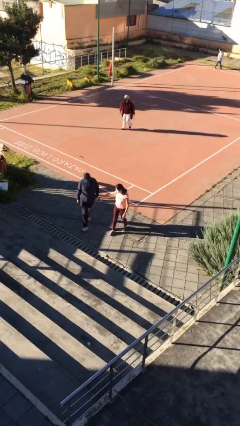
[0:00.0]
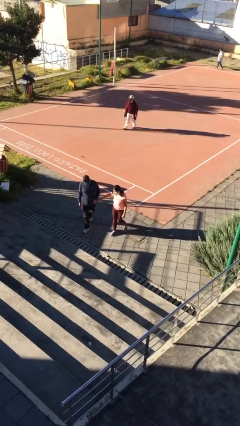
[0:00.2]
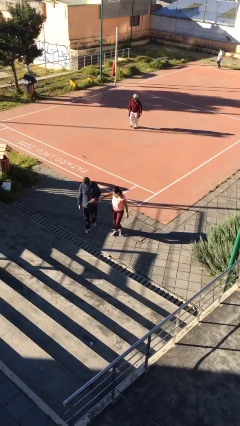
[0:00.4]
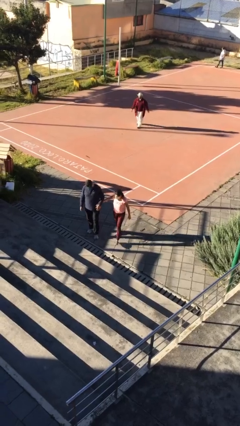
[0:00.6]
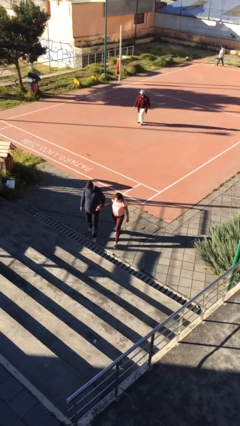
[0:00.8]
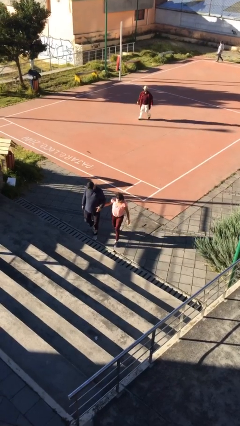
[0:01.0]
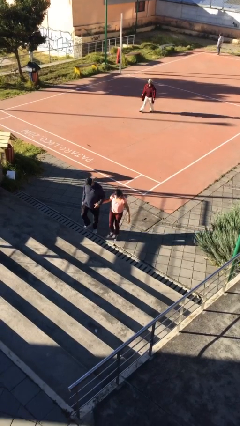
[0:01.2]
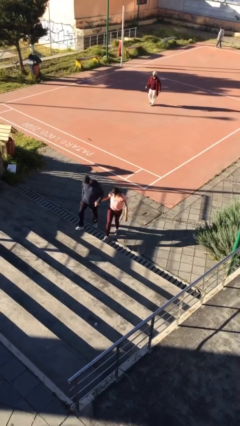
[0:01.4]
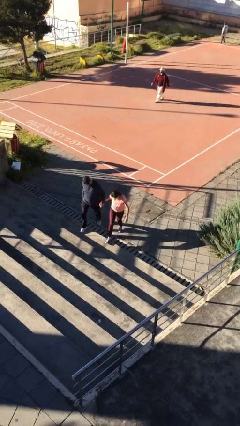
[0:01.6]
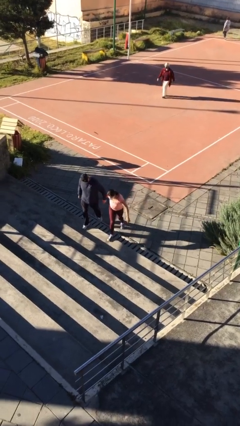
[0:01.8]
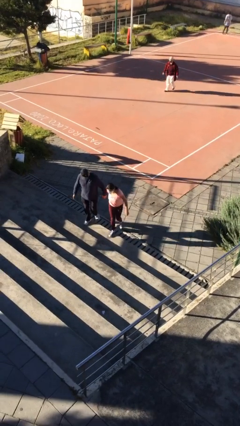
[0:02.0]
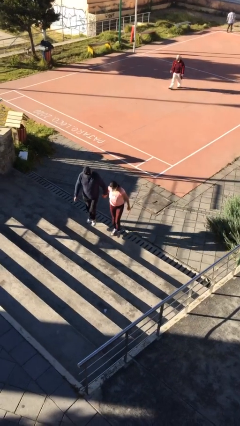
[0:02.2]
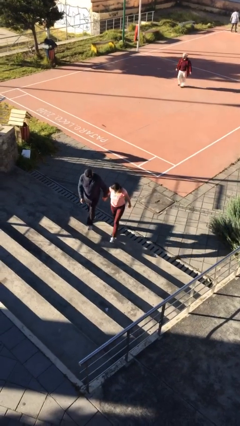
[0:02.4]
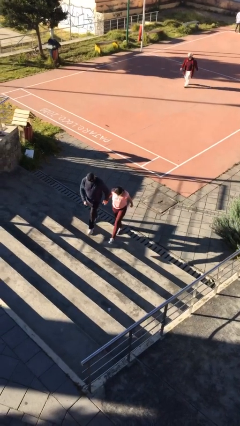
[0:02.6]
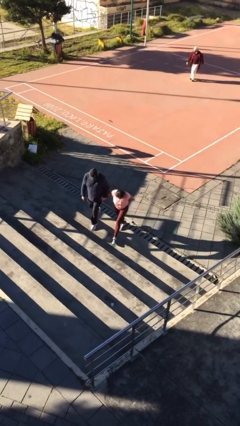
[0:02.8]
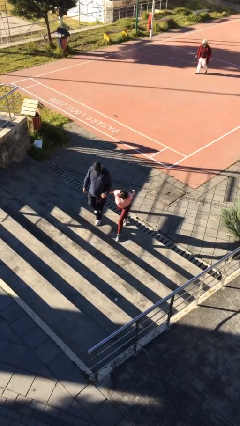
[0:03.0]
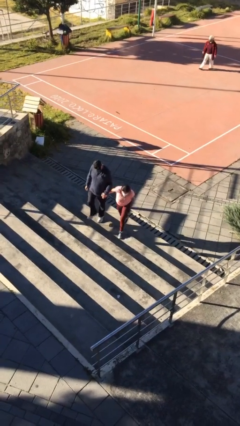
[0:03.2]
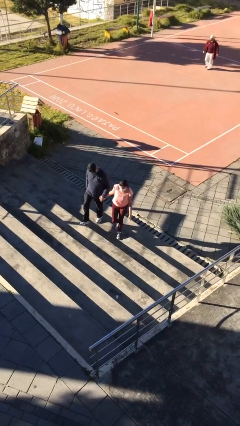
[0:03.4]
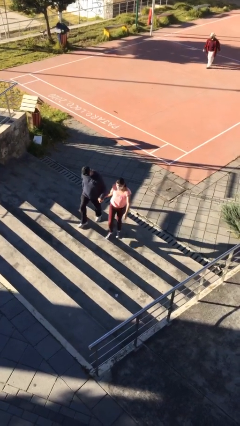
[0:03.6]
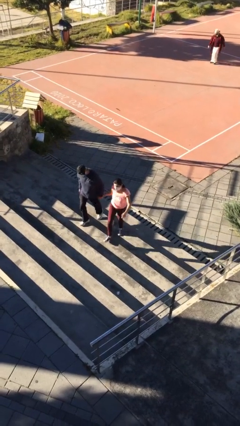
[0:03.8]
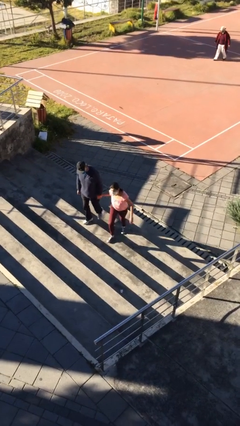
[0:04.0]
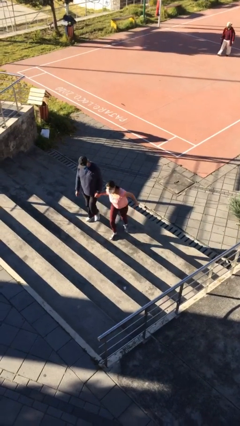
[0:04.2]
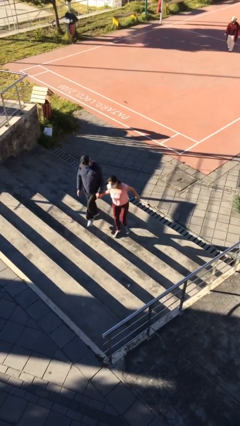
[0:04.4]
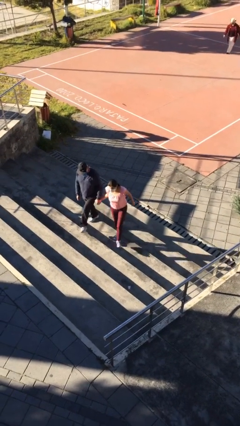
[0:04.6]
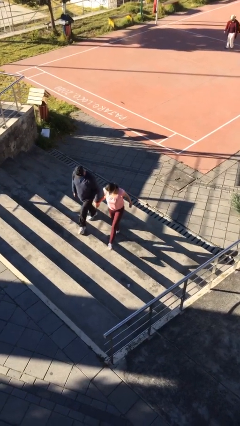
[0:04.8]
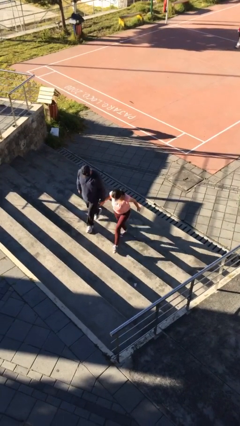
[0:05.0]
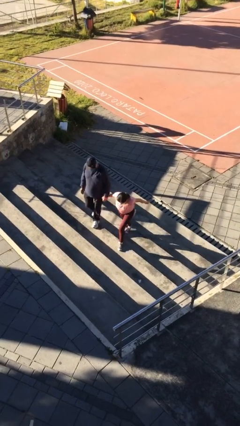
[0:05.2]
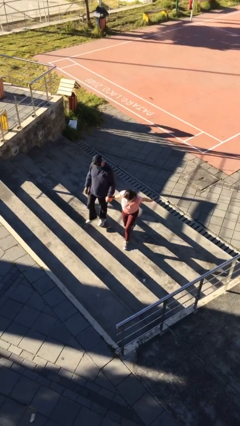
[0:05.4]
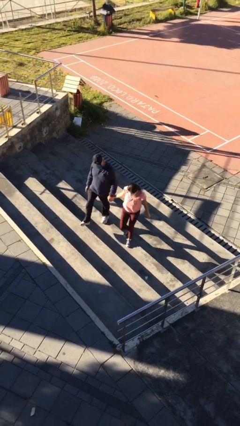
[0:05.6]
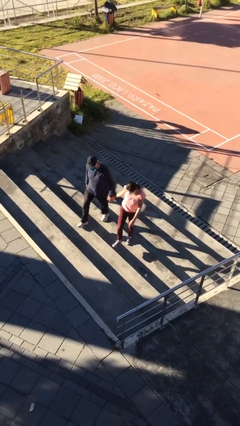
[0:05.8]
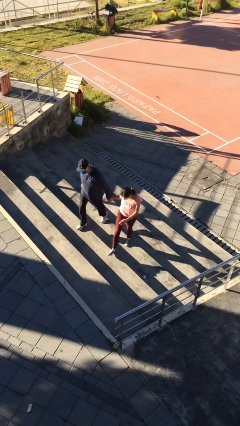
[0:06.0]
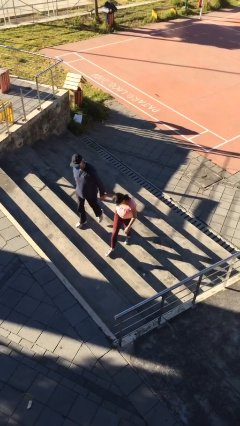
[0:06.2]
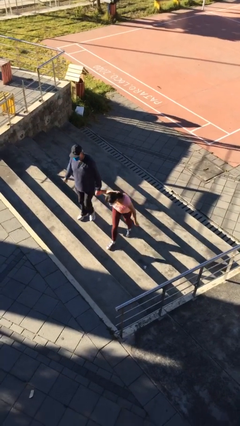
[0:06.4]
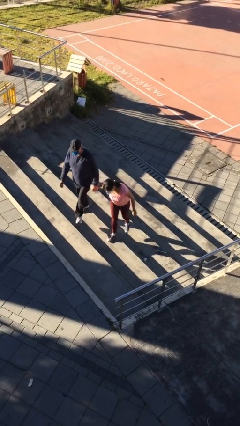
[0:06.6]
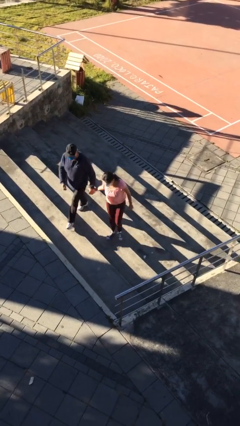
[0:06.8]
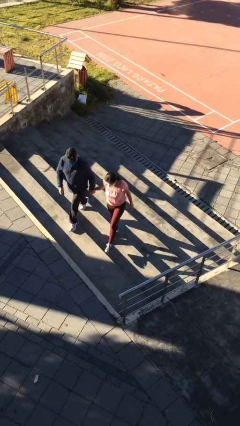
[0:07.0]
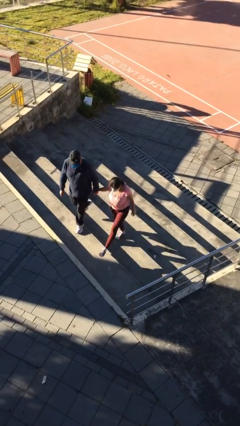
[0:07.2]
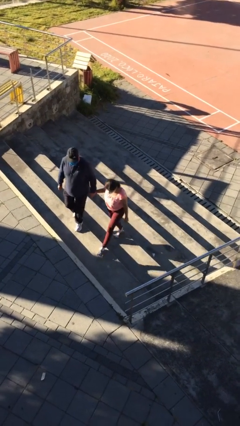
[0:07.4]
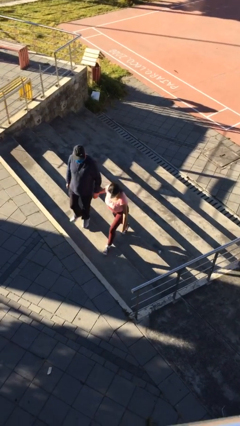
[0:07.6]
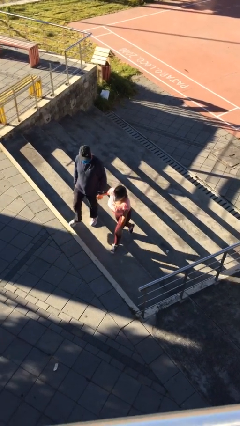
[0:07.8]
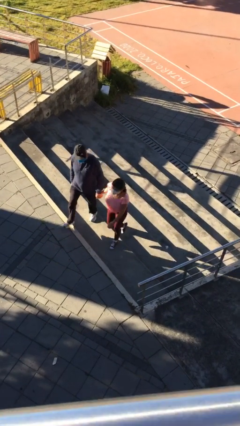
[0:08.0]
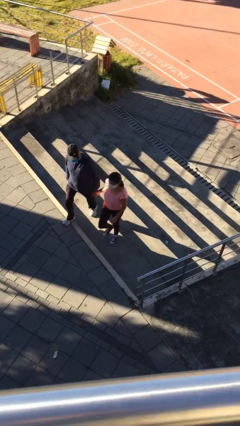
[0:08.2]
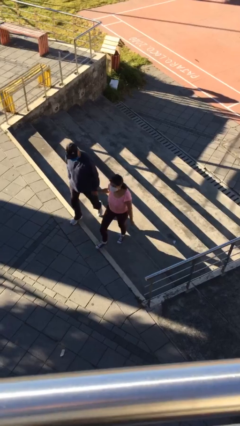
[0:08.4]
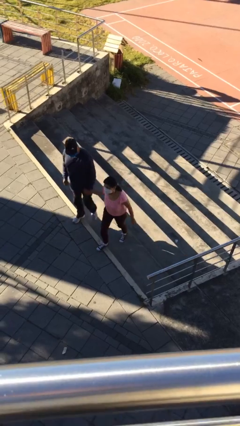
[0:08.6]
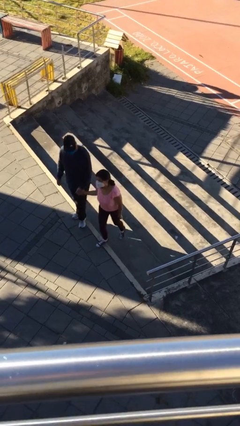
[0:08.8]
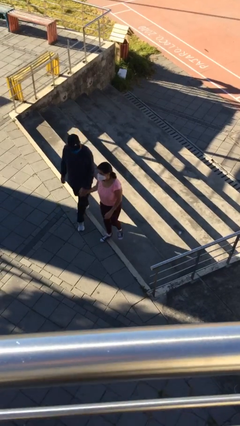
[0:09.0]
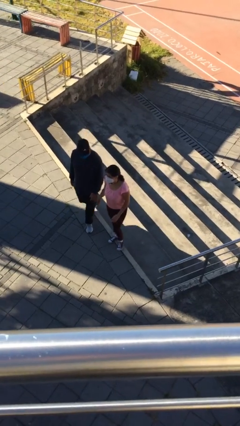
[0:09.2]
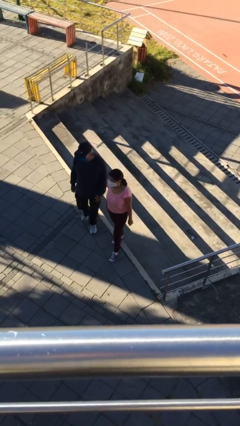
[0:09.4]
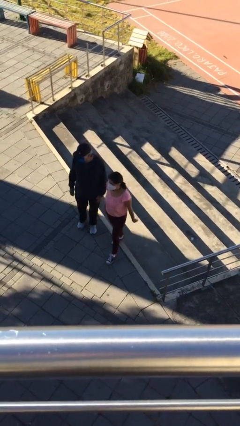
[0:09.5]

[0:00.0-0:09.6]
person holds hand

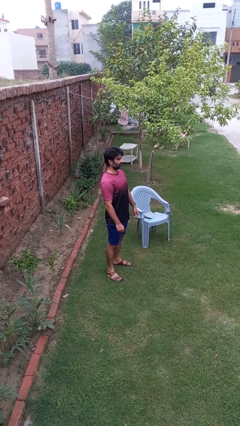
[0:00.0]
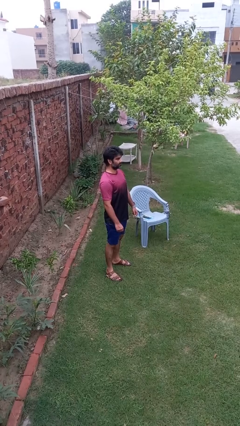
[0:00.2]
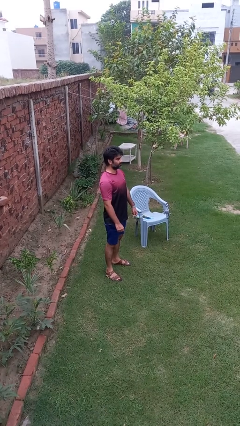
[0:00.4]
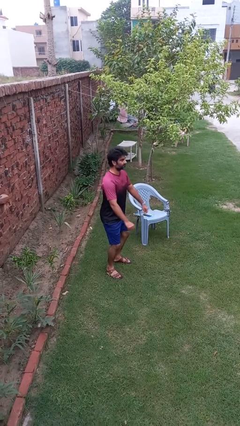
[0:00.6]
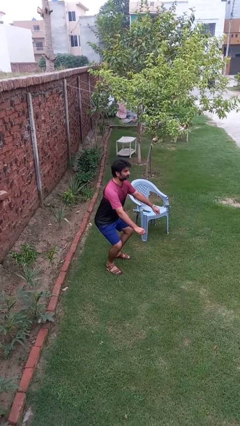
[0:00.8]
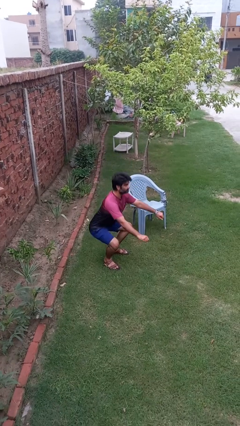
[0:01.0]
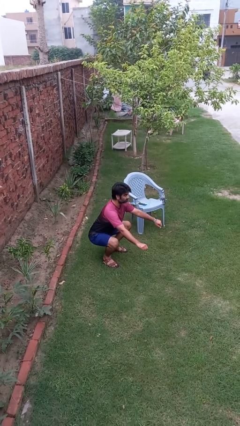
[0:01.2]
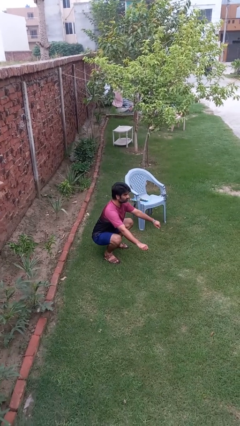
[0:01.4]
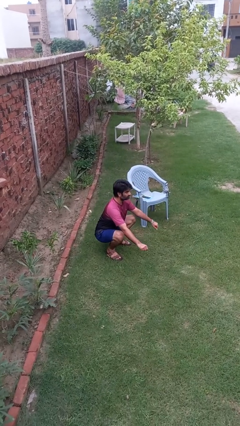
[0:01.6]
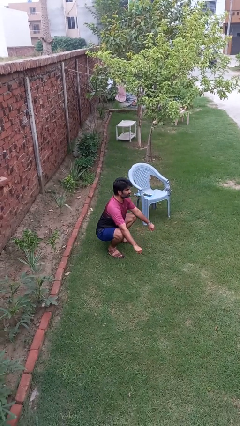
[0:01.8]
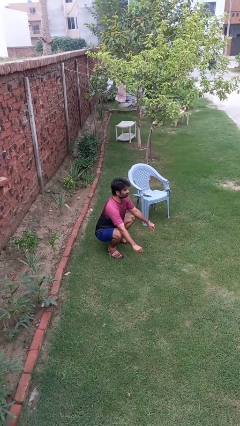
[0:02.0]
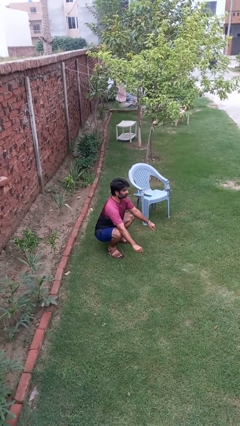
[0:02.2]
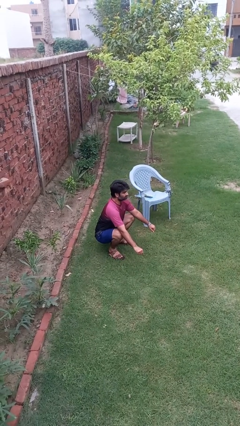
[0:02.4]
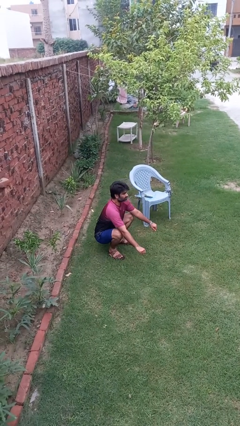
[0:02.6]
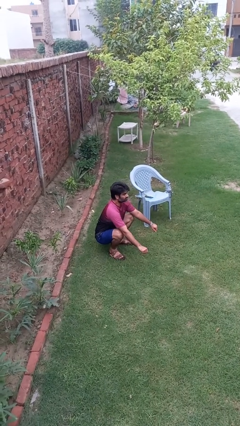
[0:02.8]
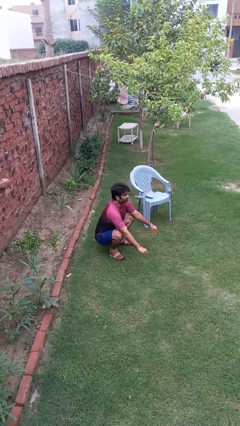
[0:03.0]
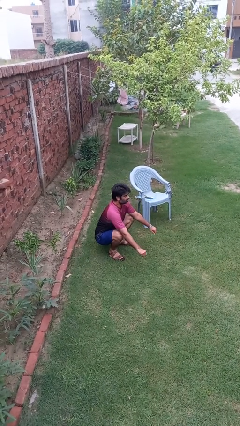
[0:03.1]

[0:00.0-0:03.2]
person squats

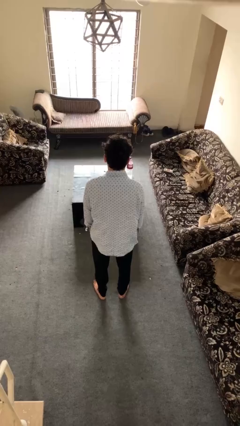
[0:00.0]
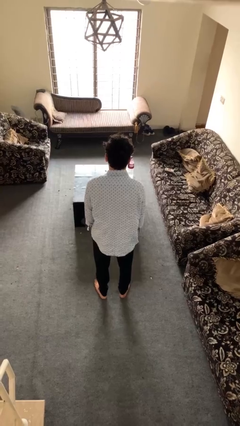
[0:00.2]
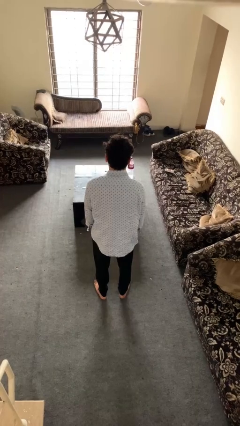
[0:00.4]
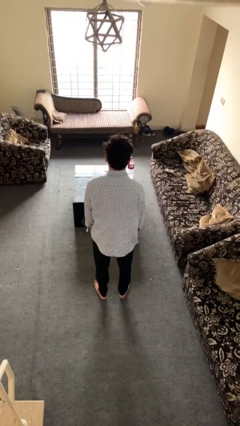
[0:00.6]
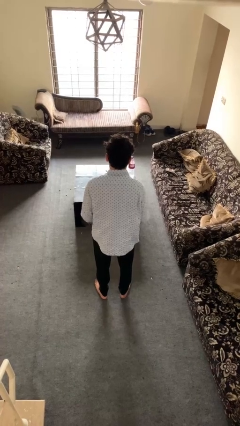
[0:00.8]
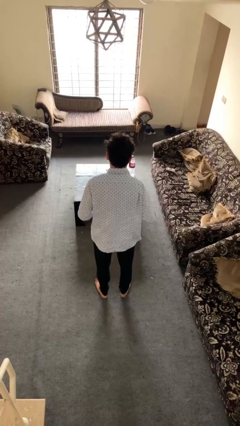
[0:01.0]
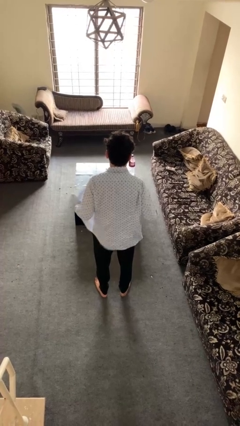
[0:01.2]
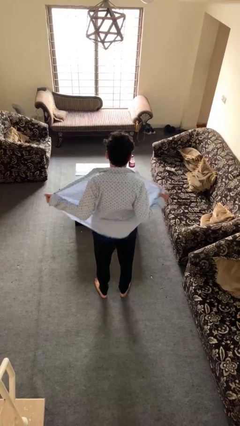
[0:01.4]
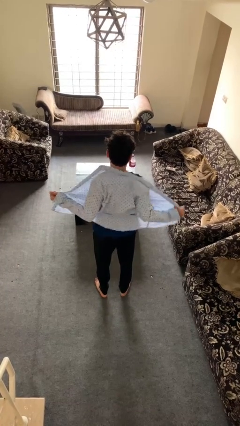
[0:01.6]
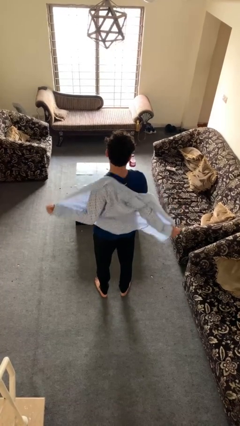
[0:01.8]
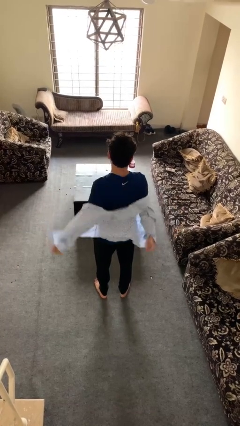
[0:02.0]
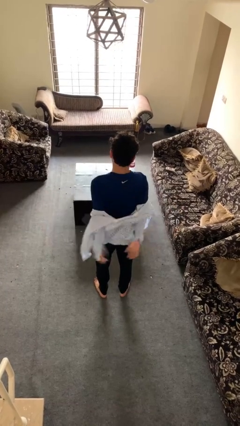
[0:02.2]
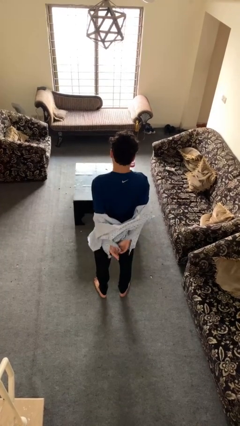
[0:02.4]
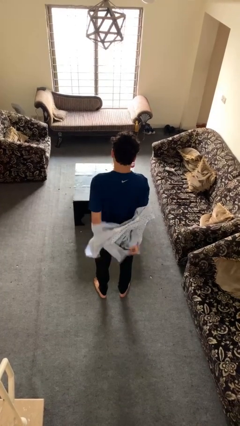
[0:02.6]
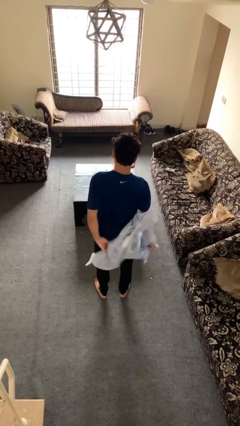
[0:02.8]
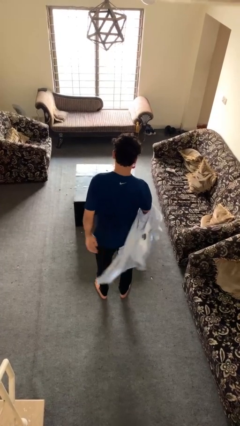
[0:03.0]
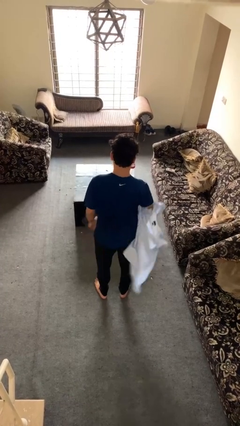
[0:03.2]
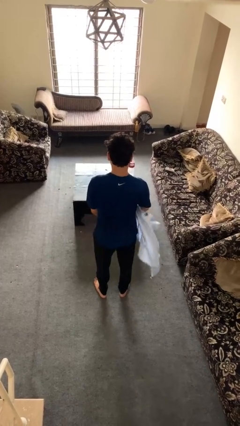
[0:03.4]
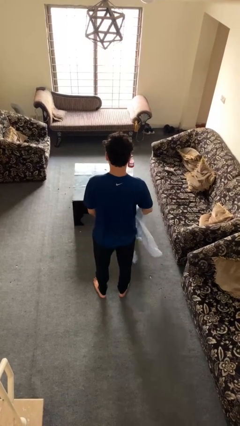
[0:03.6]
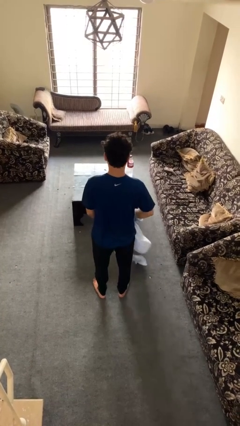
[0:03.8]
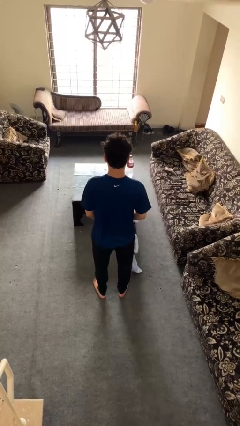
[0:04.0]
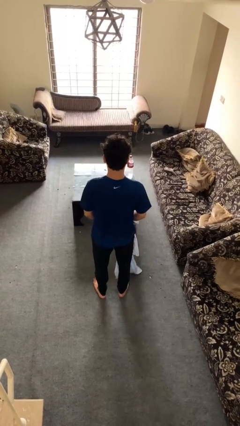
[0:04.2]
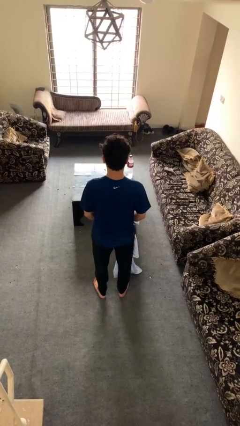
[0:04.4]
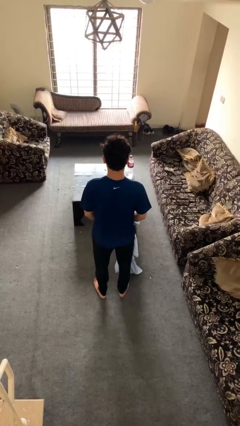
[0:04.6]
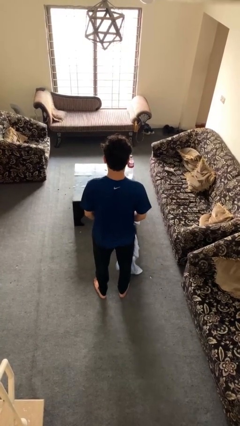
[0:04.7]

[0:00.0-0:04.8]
person takes off shirt

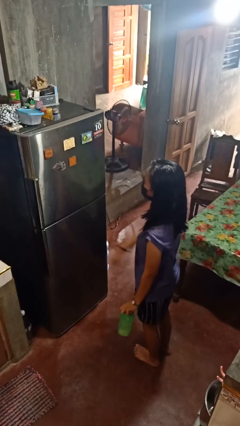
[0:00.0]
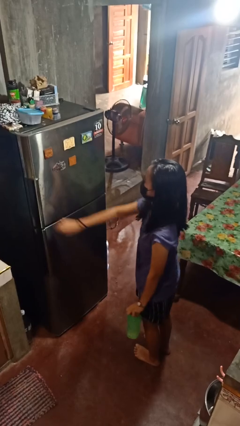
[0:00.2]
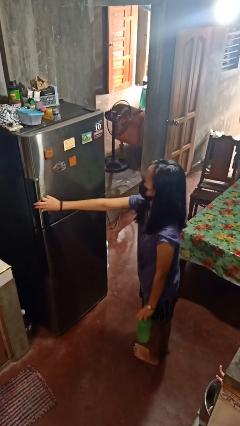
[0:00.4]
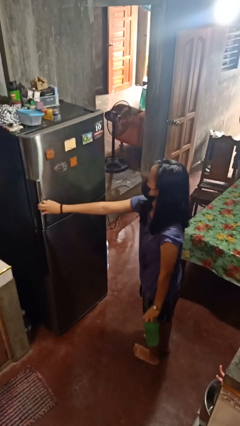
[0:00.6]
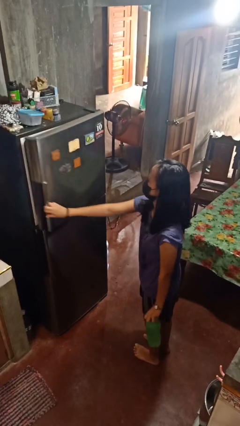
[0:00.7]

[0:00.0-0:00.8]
person opens refrigerator
